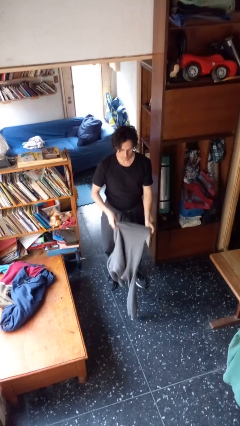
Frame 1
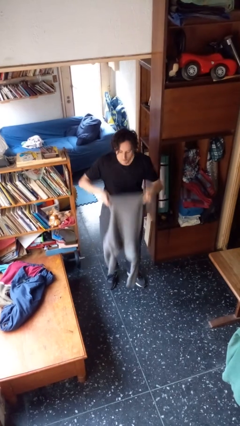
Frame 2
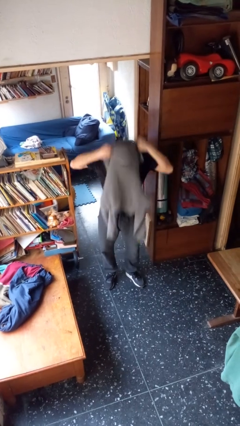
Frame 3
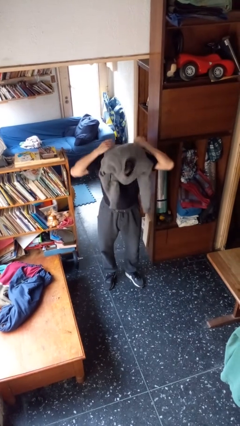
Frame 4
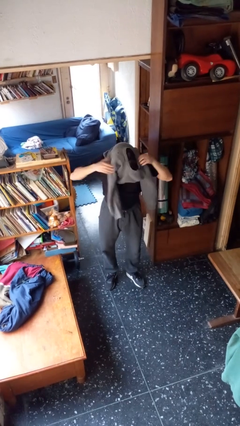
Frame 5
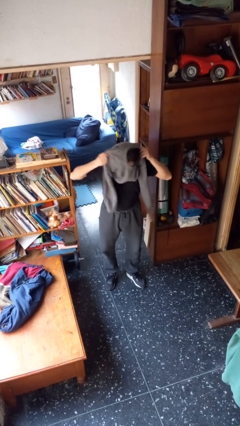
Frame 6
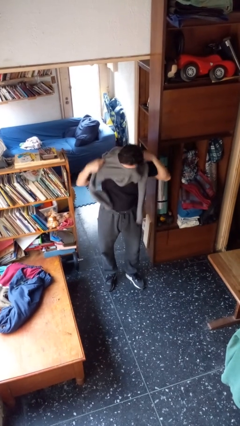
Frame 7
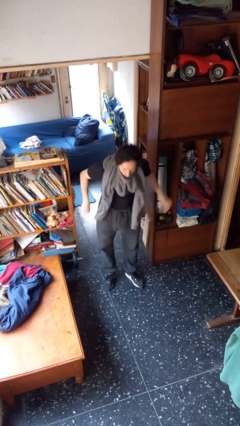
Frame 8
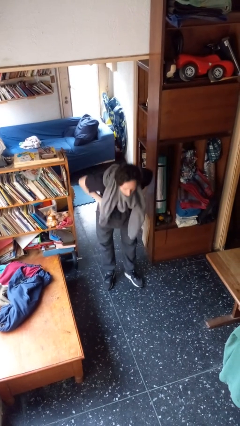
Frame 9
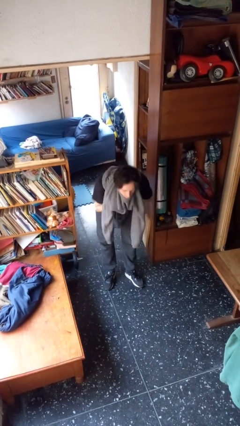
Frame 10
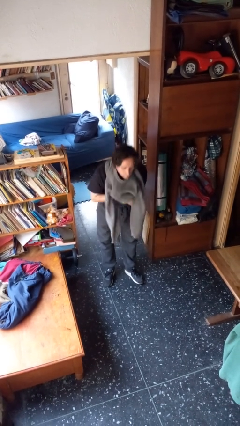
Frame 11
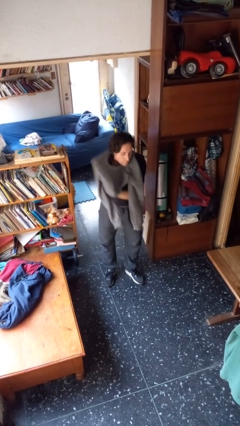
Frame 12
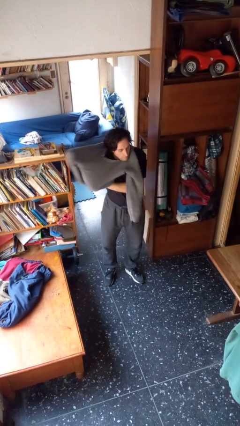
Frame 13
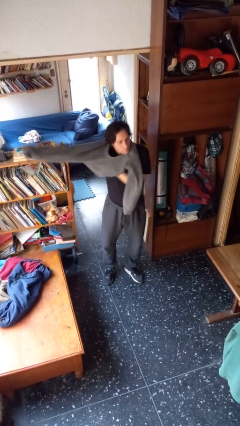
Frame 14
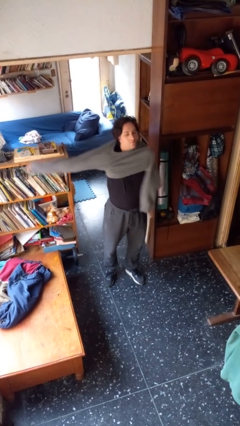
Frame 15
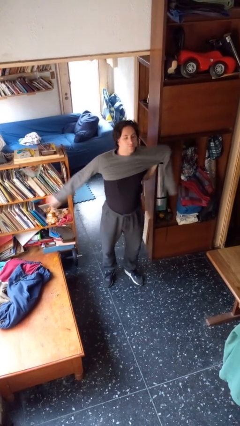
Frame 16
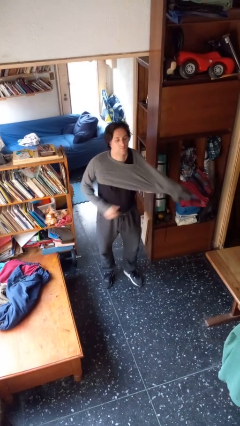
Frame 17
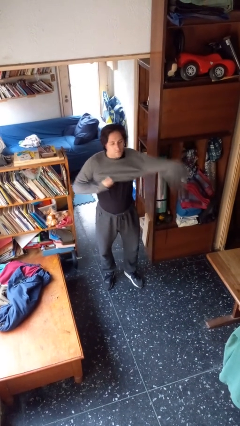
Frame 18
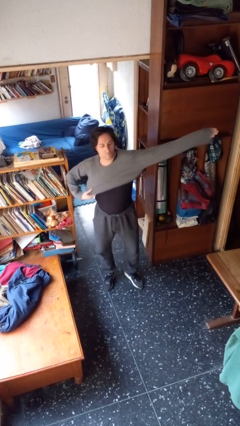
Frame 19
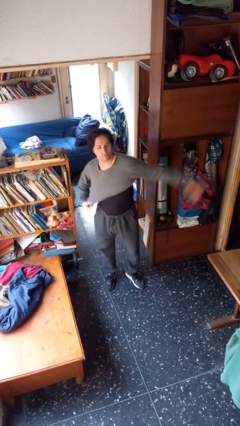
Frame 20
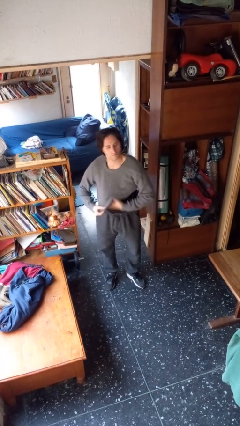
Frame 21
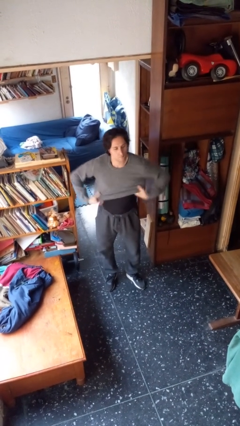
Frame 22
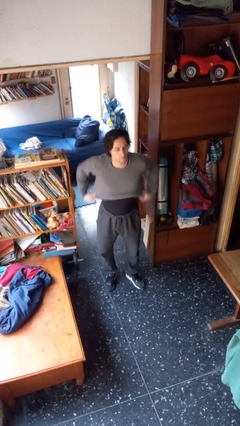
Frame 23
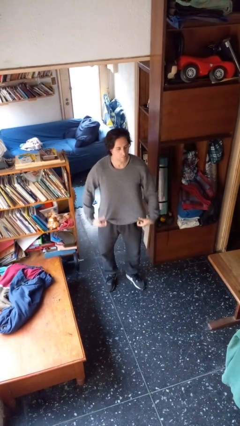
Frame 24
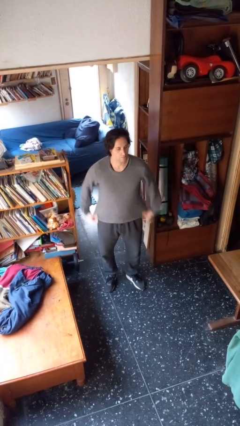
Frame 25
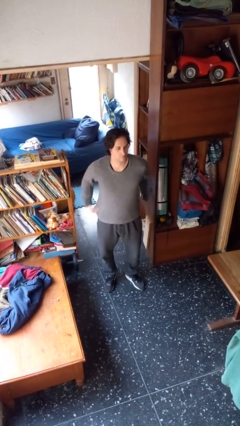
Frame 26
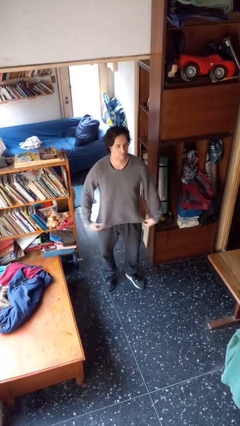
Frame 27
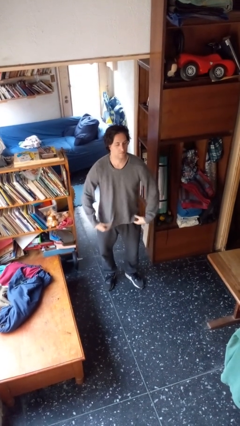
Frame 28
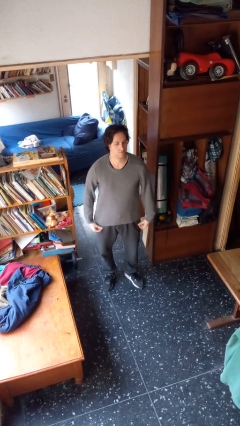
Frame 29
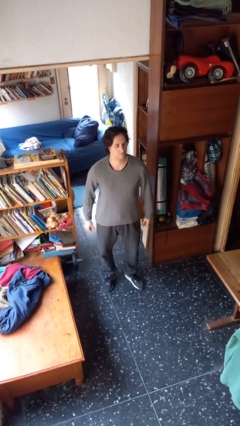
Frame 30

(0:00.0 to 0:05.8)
person puts on shirt

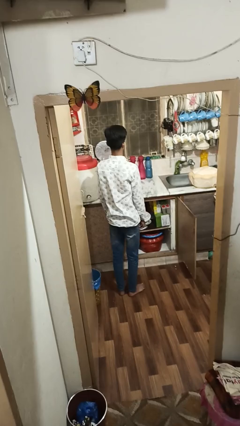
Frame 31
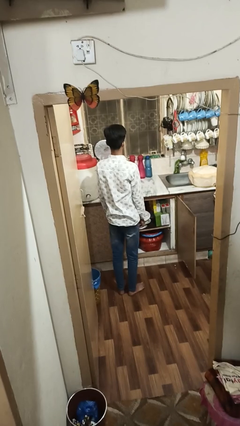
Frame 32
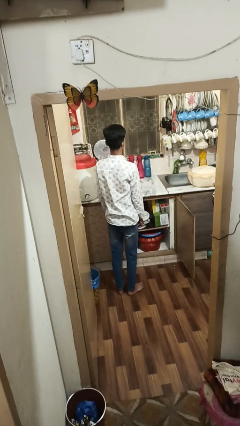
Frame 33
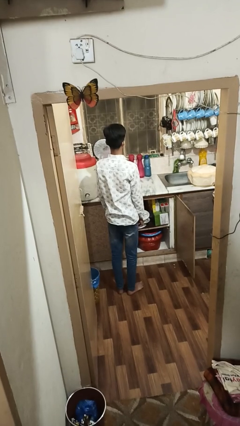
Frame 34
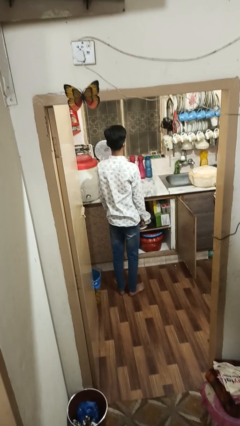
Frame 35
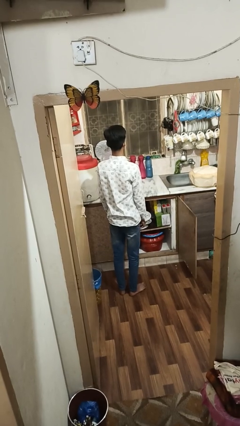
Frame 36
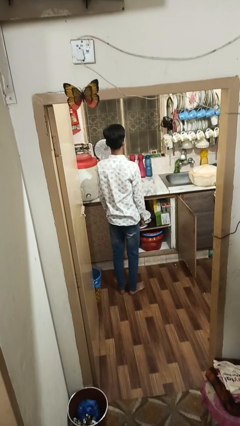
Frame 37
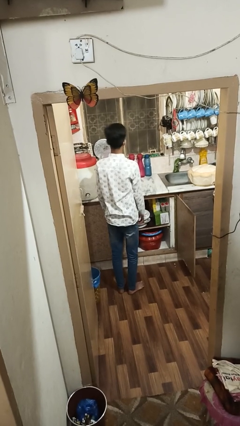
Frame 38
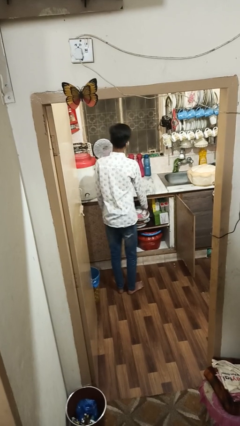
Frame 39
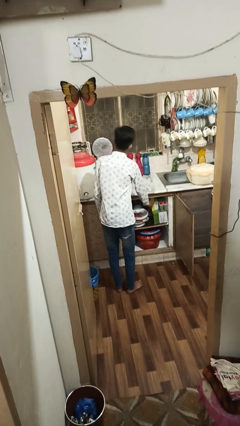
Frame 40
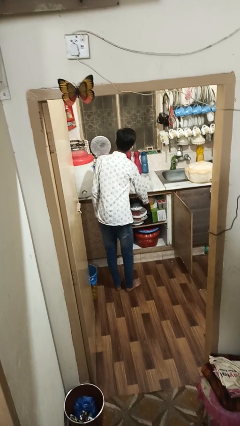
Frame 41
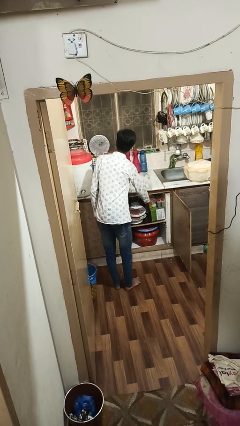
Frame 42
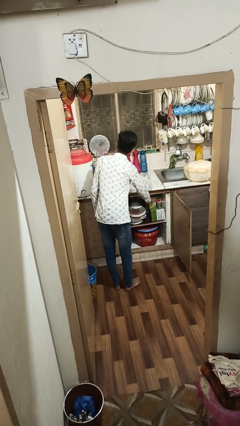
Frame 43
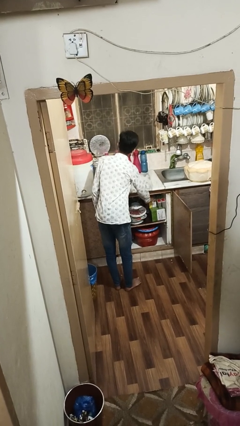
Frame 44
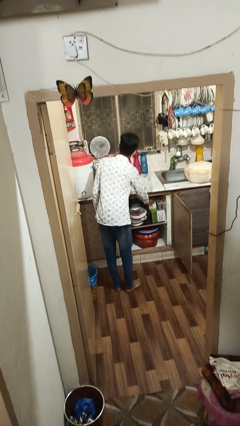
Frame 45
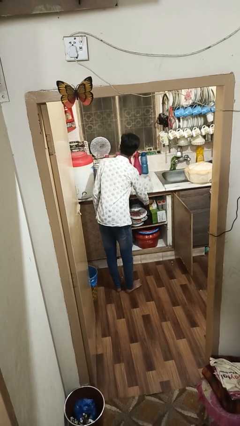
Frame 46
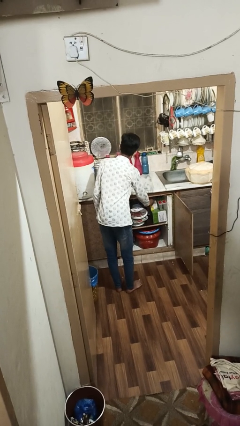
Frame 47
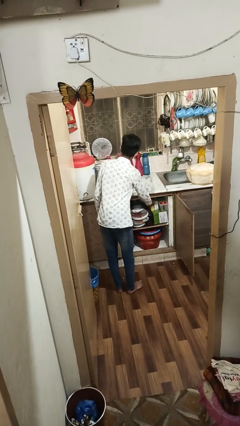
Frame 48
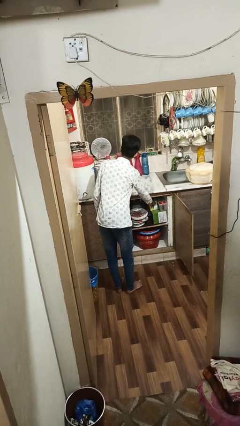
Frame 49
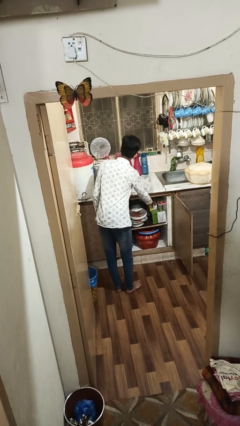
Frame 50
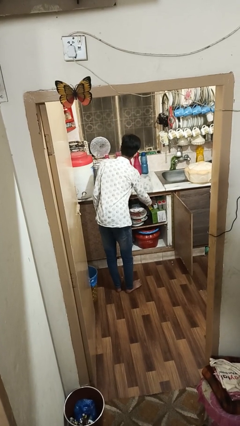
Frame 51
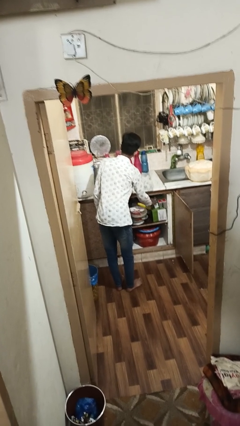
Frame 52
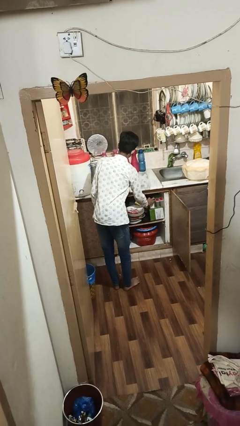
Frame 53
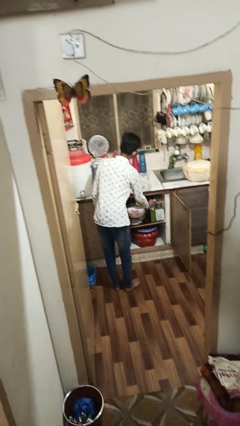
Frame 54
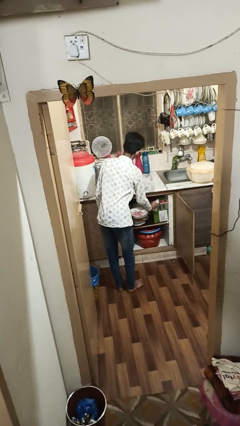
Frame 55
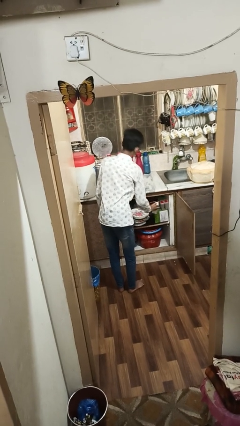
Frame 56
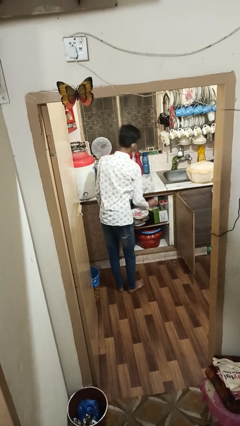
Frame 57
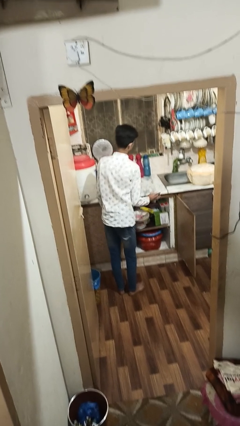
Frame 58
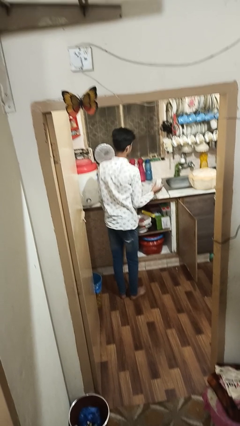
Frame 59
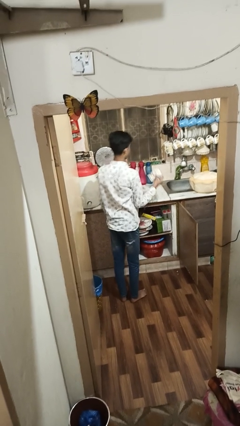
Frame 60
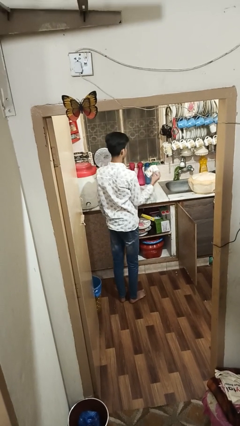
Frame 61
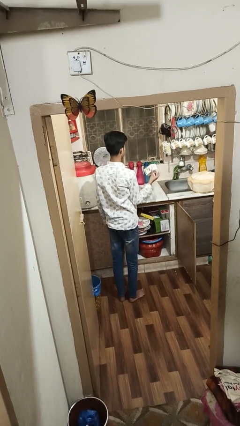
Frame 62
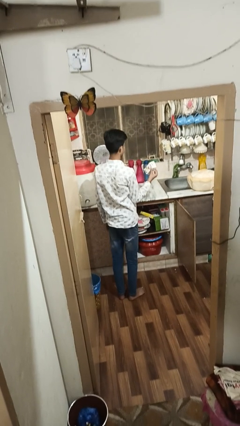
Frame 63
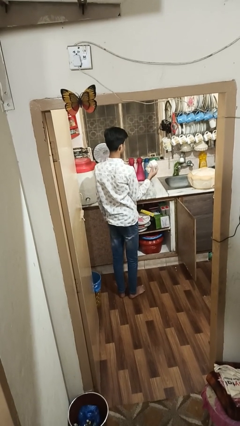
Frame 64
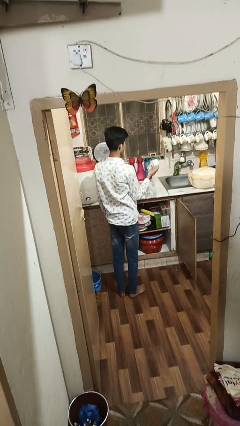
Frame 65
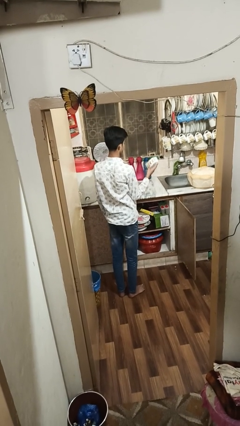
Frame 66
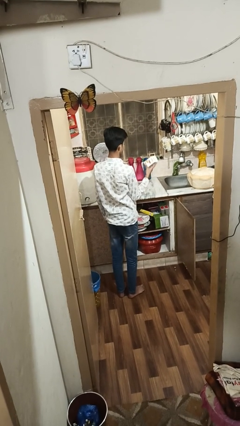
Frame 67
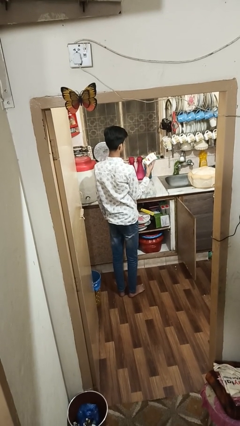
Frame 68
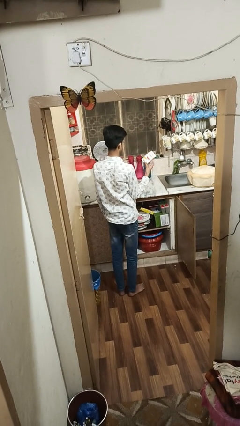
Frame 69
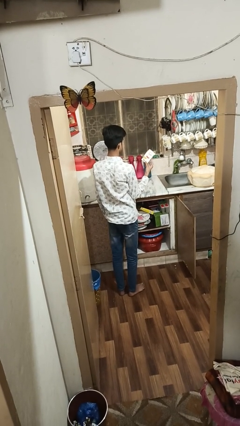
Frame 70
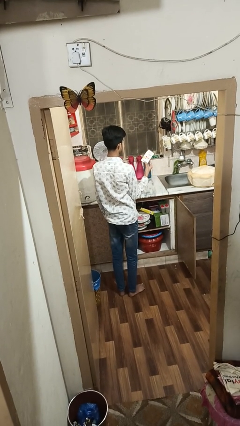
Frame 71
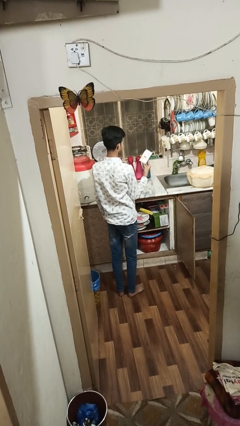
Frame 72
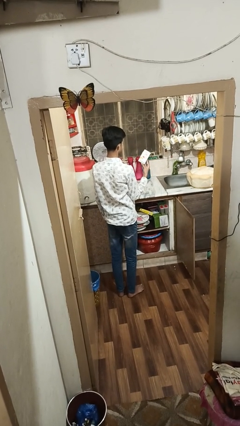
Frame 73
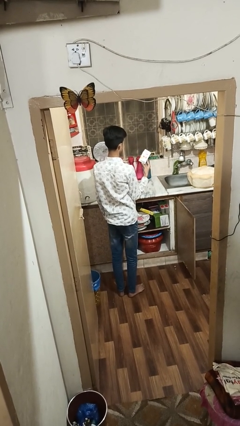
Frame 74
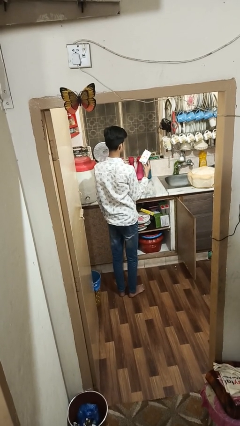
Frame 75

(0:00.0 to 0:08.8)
person takes object from cabinet

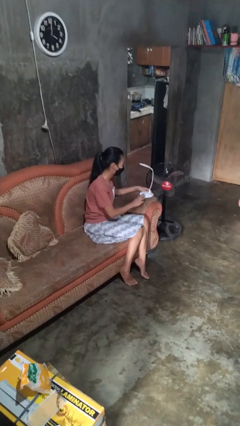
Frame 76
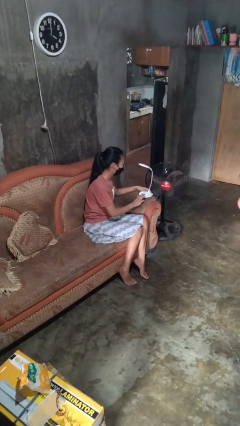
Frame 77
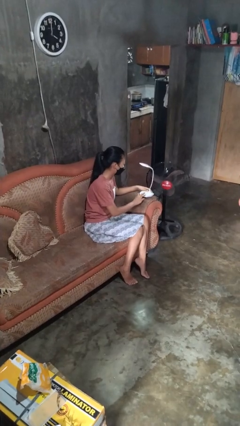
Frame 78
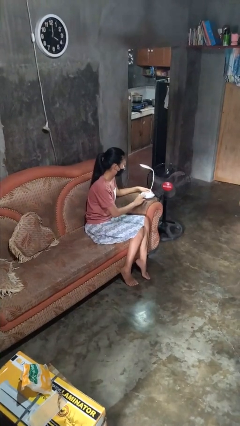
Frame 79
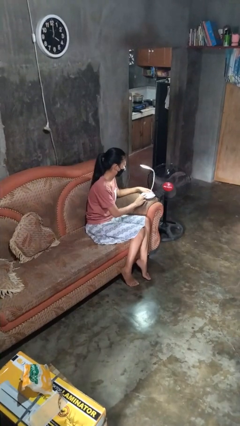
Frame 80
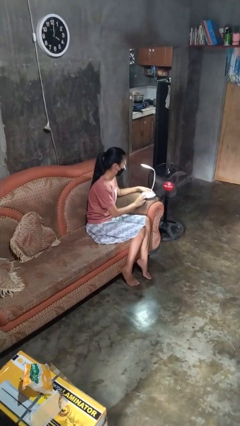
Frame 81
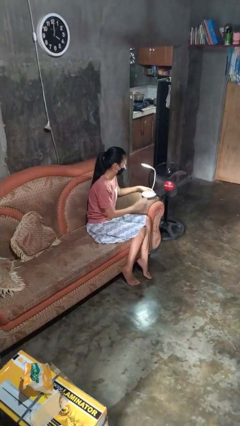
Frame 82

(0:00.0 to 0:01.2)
person turns on lamp

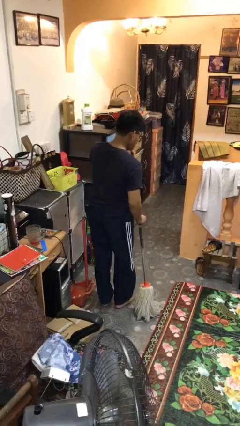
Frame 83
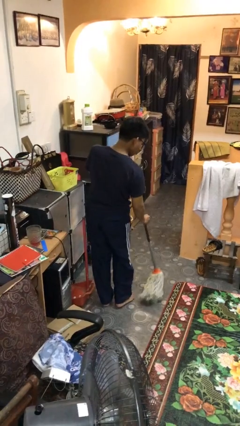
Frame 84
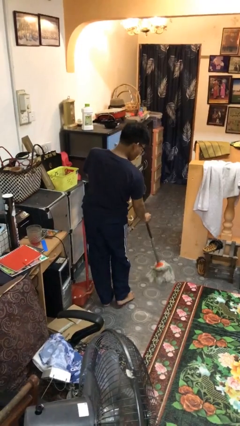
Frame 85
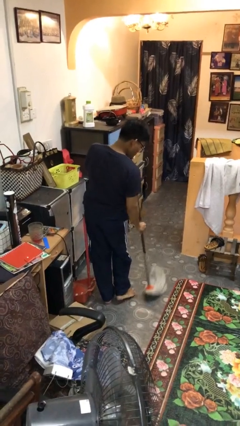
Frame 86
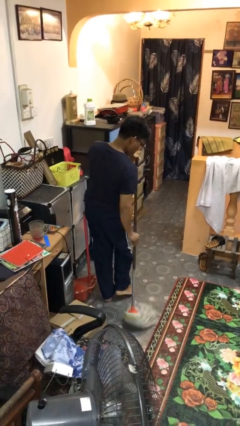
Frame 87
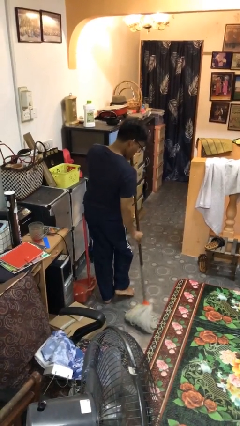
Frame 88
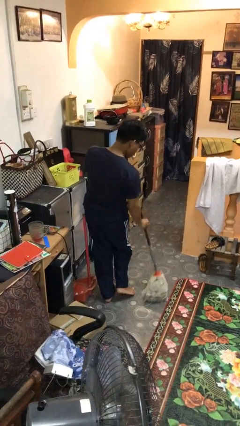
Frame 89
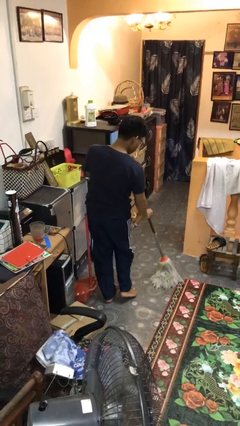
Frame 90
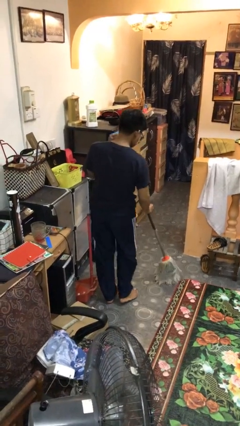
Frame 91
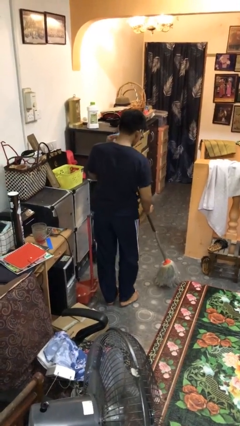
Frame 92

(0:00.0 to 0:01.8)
person mops

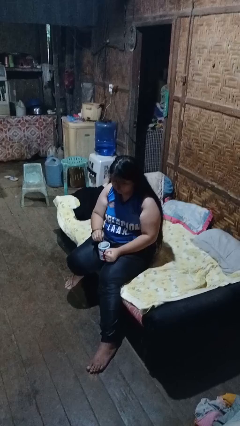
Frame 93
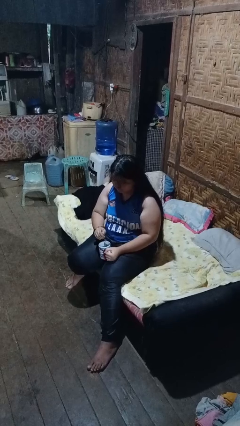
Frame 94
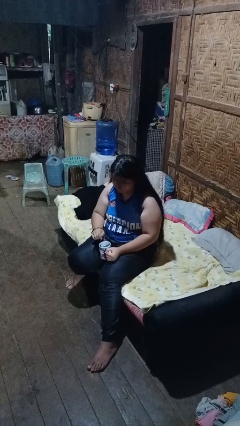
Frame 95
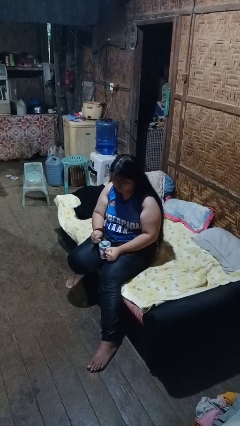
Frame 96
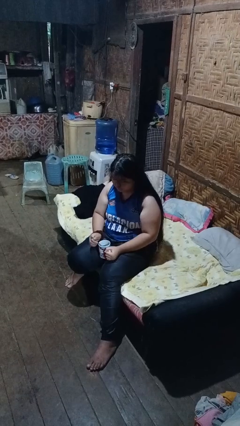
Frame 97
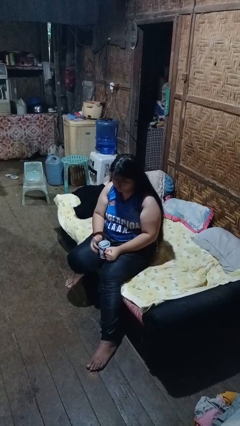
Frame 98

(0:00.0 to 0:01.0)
person stirs mug
